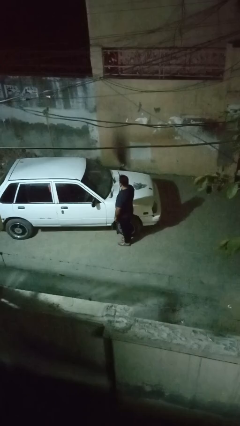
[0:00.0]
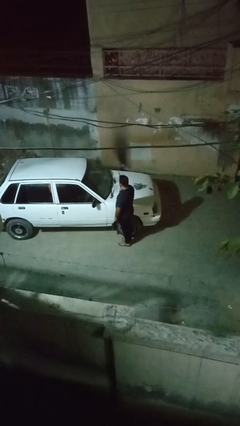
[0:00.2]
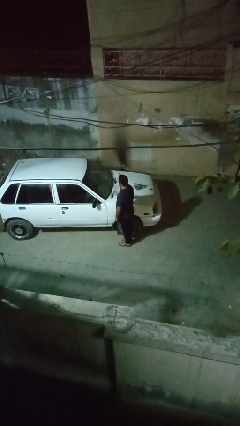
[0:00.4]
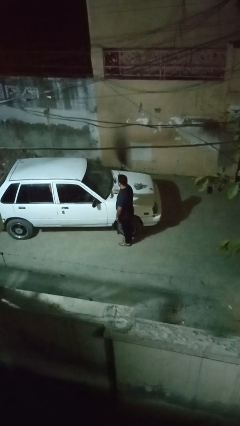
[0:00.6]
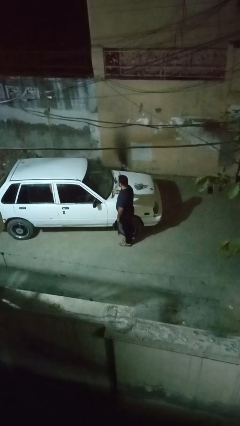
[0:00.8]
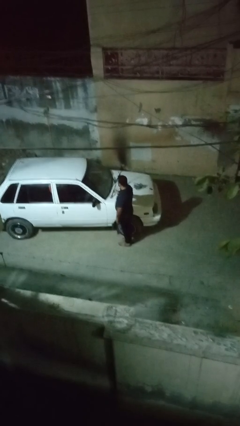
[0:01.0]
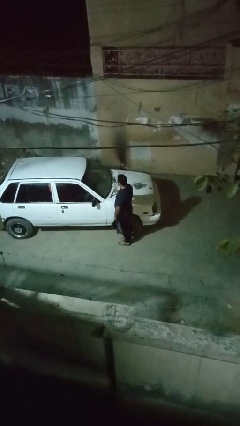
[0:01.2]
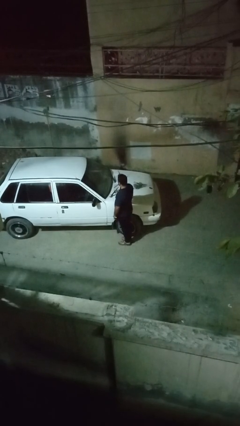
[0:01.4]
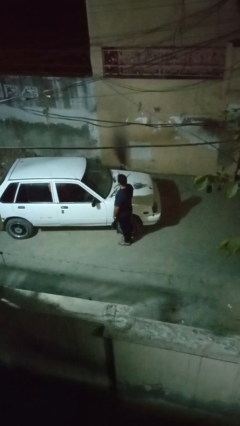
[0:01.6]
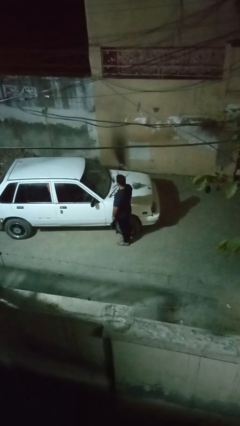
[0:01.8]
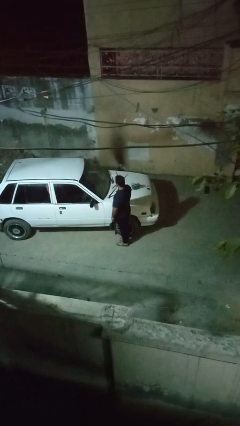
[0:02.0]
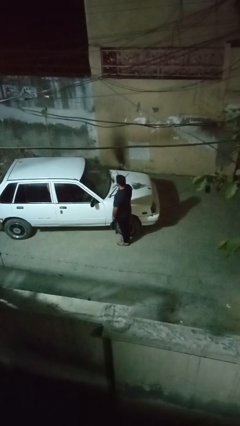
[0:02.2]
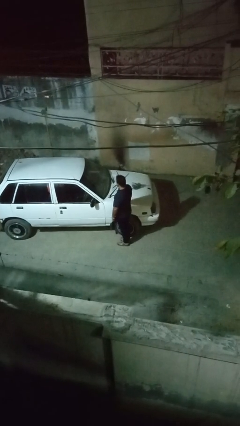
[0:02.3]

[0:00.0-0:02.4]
person flips up car wipers

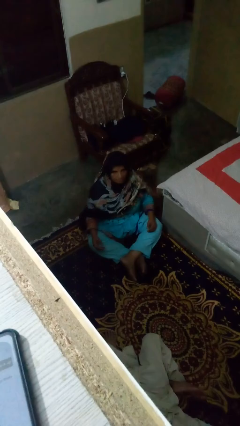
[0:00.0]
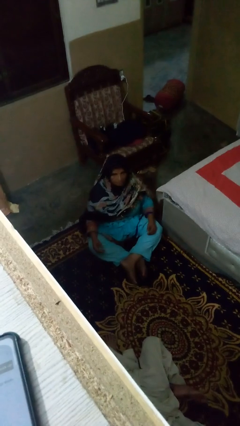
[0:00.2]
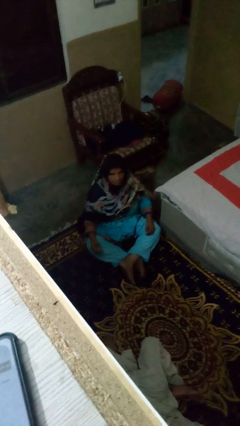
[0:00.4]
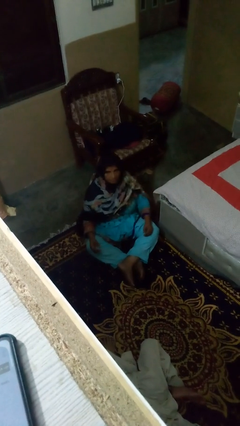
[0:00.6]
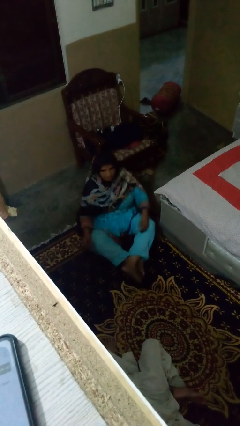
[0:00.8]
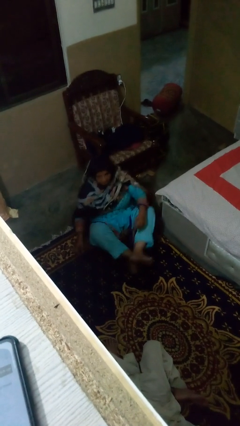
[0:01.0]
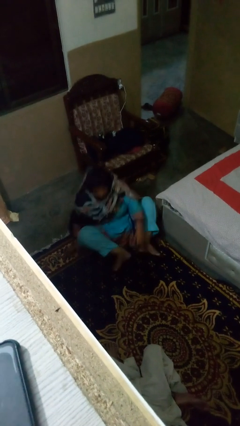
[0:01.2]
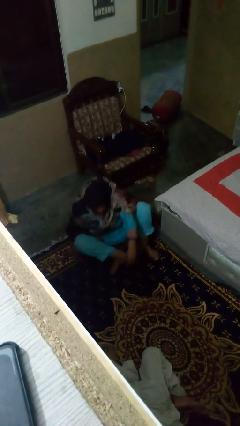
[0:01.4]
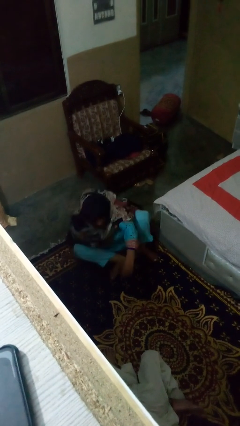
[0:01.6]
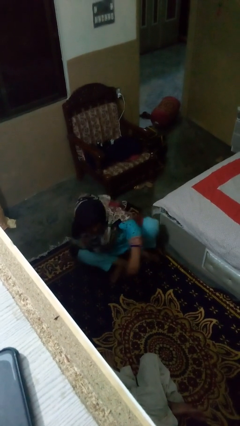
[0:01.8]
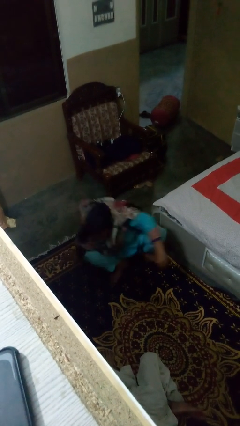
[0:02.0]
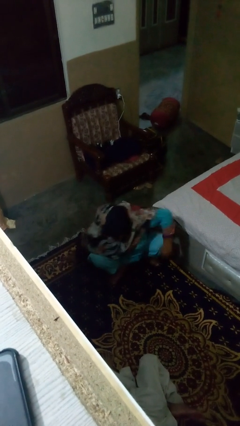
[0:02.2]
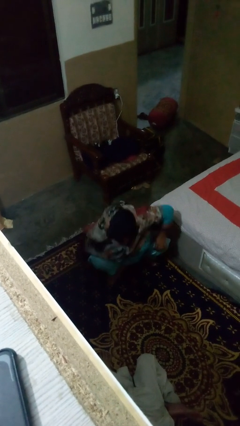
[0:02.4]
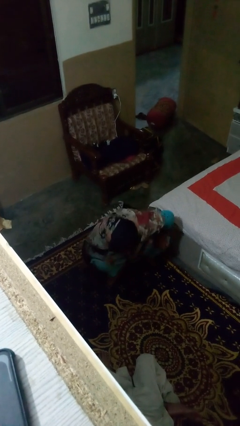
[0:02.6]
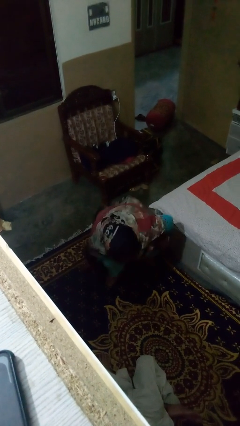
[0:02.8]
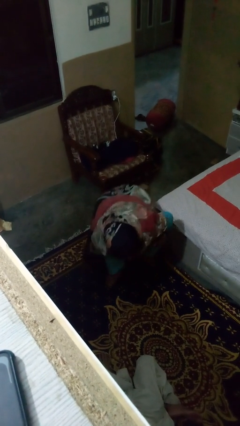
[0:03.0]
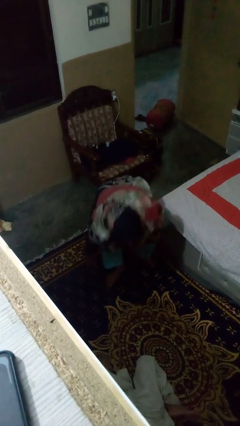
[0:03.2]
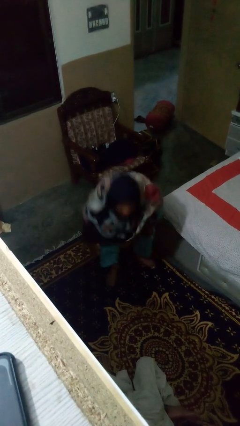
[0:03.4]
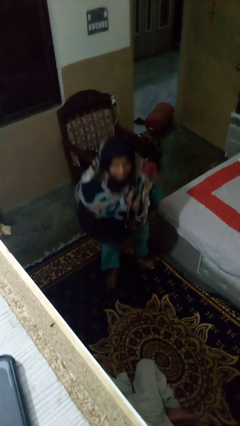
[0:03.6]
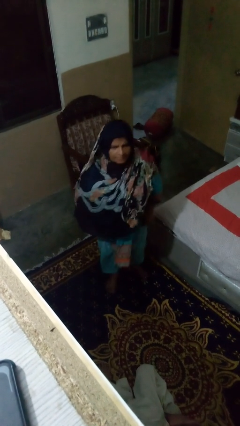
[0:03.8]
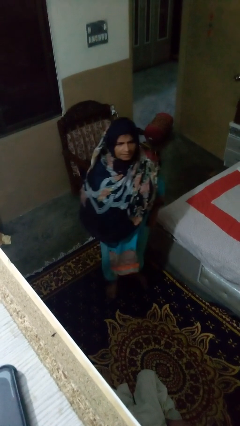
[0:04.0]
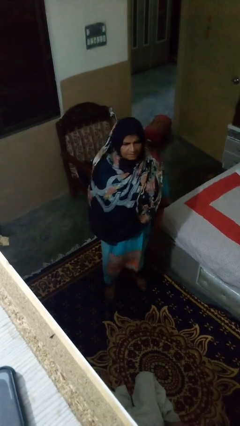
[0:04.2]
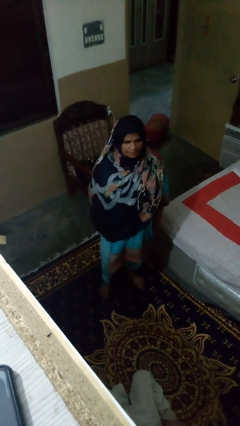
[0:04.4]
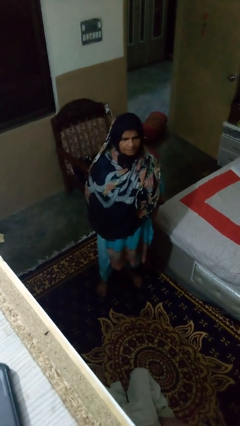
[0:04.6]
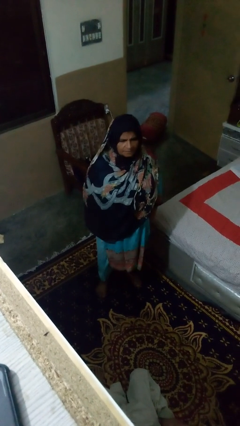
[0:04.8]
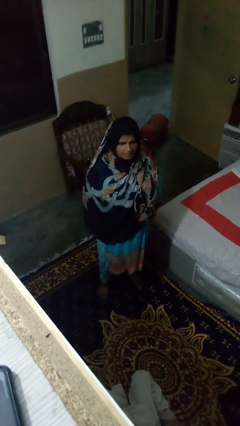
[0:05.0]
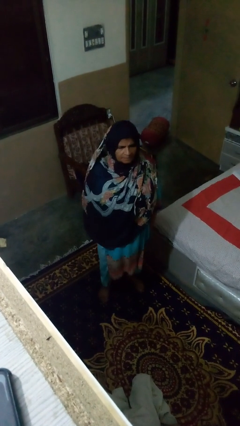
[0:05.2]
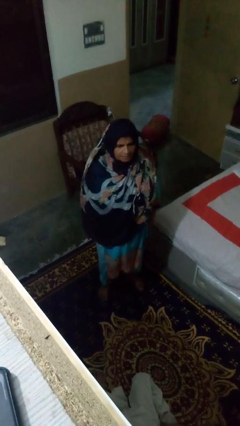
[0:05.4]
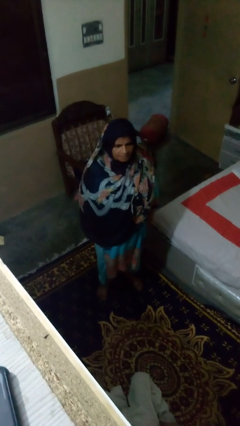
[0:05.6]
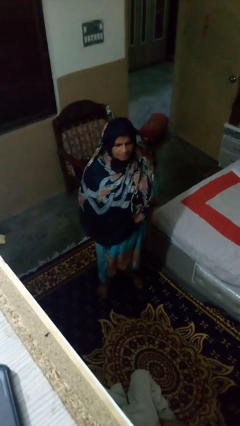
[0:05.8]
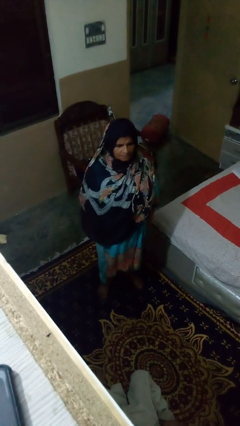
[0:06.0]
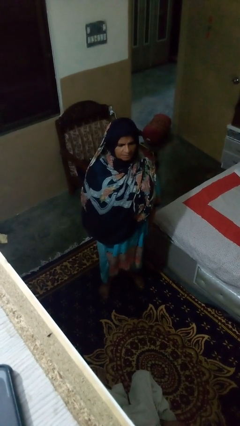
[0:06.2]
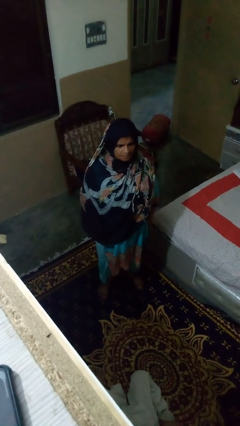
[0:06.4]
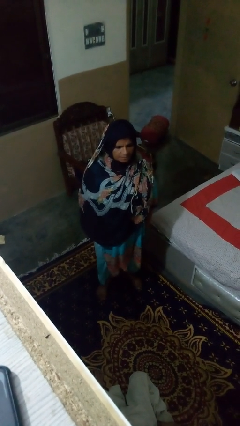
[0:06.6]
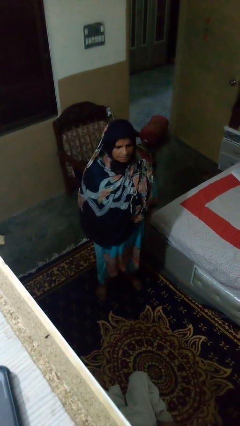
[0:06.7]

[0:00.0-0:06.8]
person stands up from floor

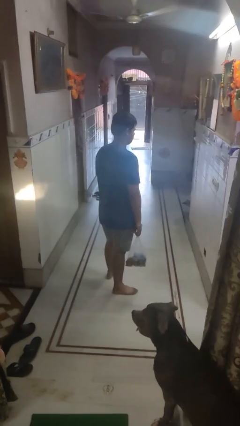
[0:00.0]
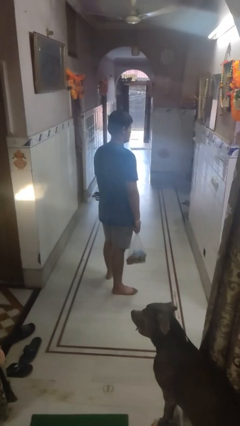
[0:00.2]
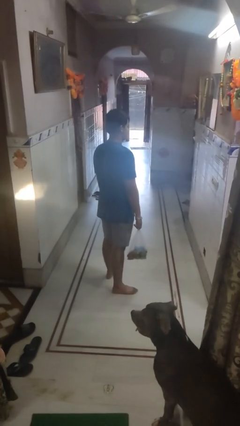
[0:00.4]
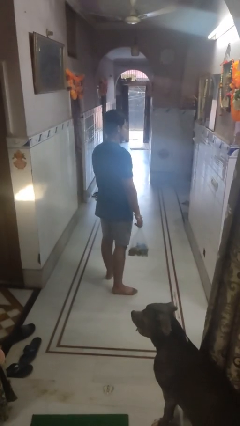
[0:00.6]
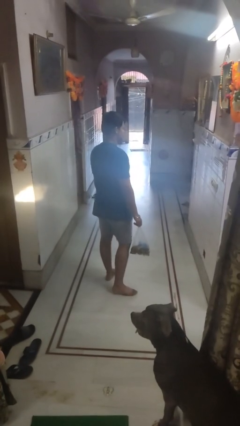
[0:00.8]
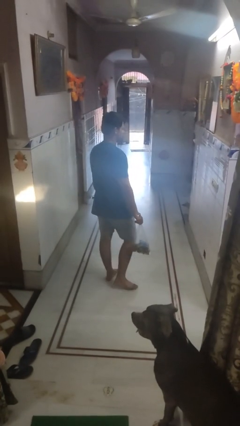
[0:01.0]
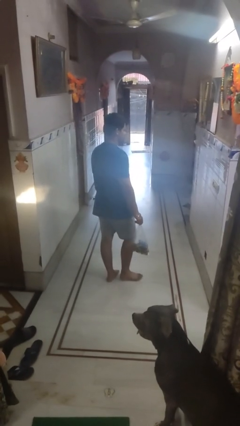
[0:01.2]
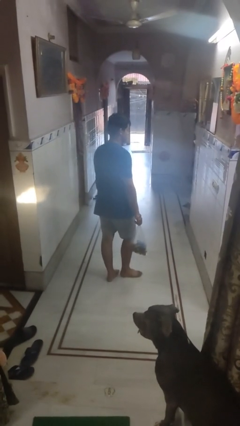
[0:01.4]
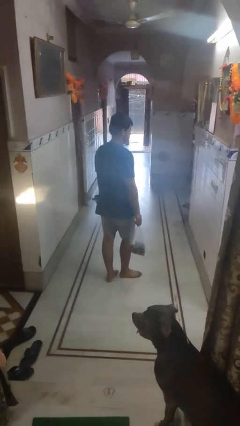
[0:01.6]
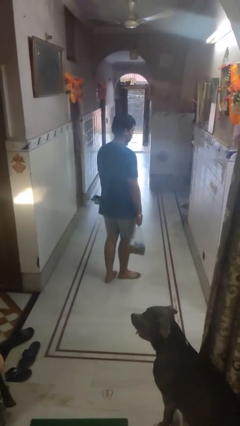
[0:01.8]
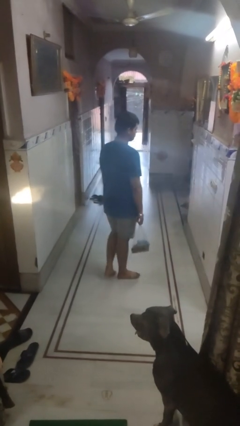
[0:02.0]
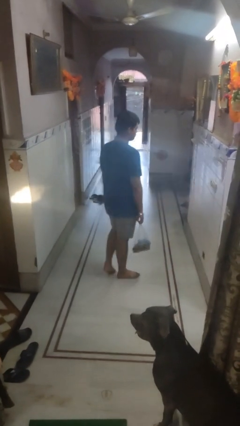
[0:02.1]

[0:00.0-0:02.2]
person carries groceries

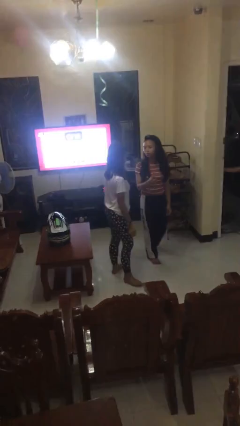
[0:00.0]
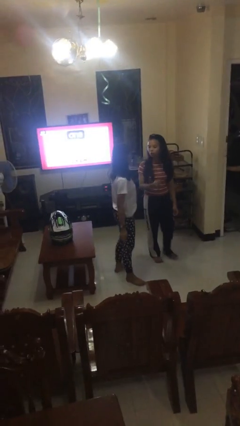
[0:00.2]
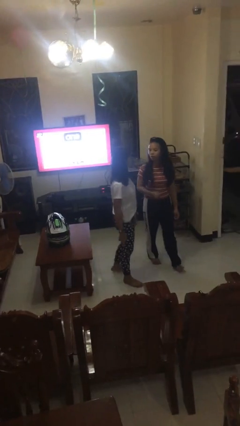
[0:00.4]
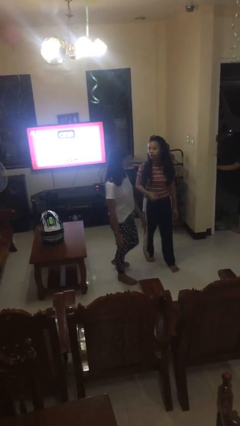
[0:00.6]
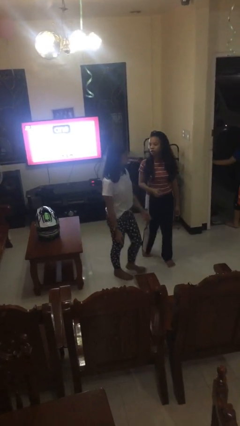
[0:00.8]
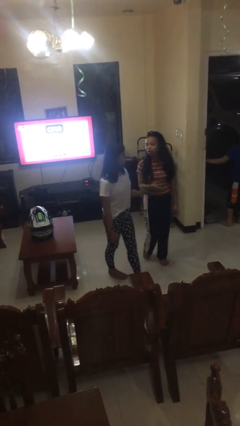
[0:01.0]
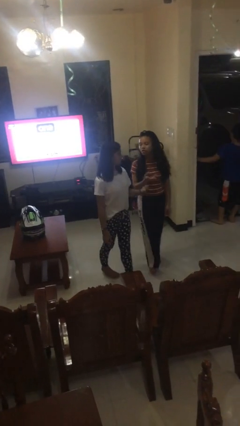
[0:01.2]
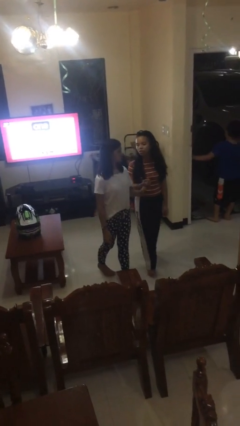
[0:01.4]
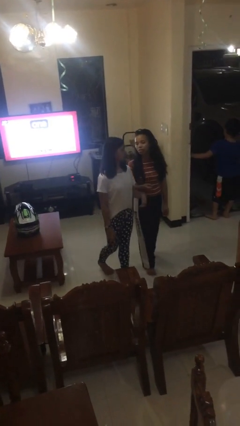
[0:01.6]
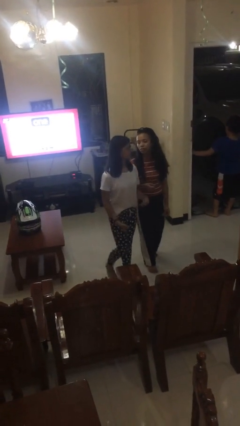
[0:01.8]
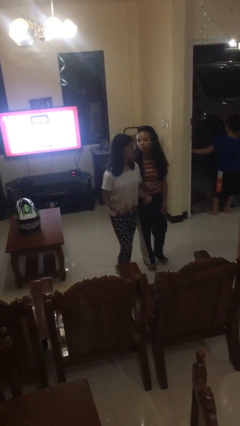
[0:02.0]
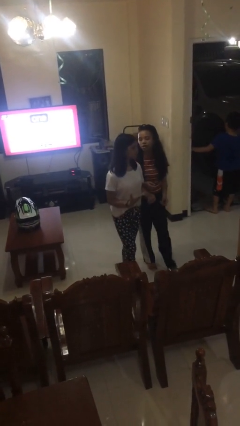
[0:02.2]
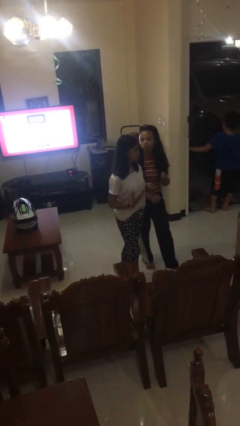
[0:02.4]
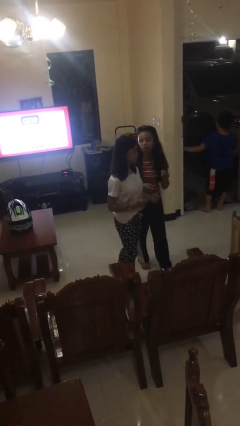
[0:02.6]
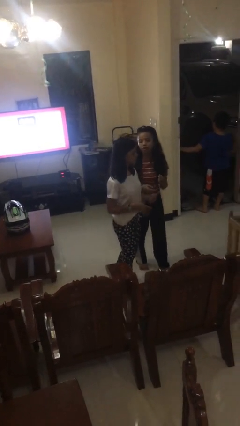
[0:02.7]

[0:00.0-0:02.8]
person talks to person

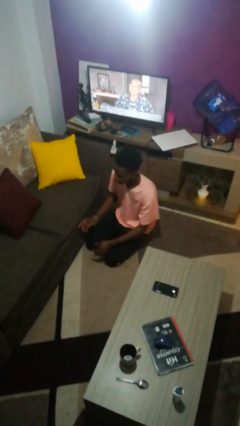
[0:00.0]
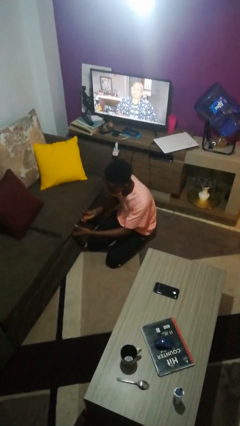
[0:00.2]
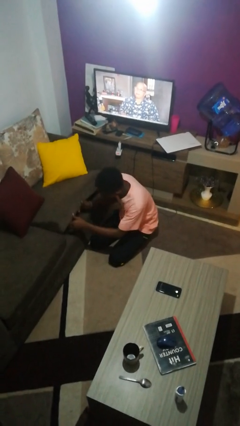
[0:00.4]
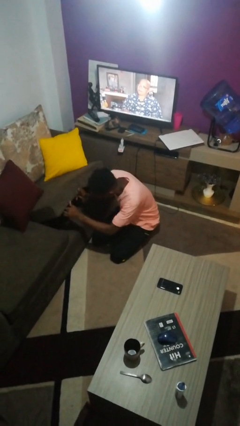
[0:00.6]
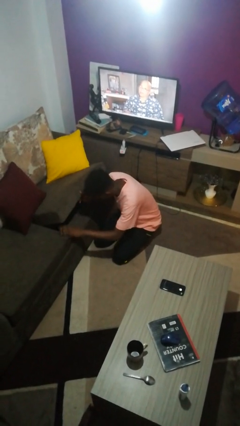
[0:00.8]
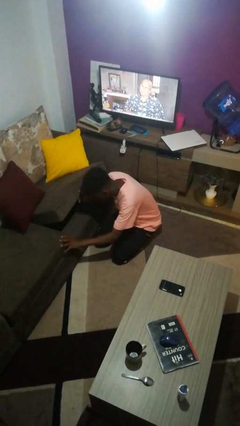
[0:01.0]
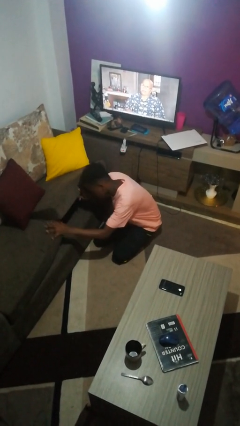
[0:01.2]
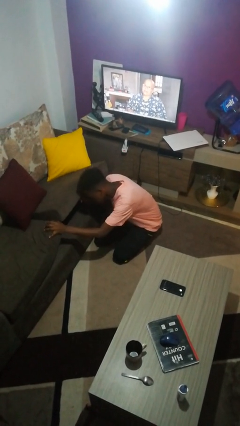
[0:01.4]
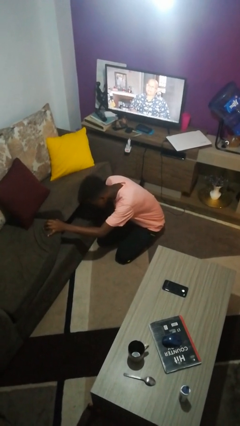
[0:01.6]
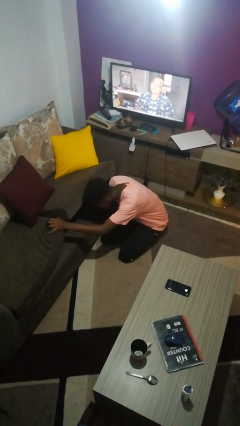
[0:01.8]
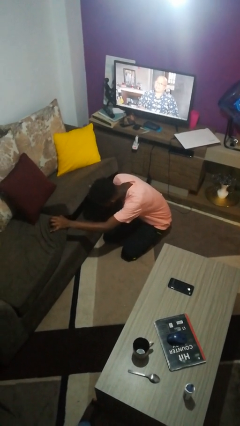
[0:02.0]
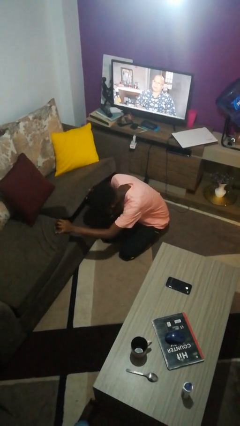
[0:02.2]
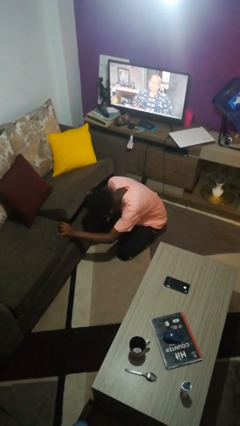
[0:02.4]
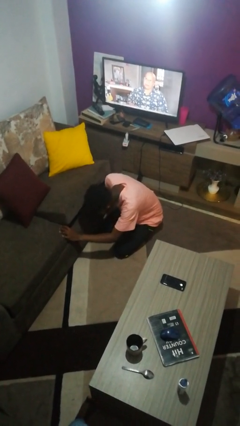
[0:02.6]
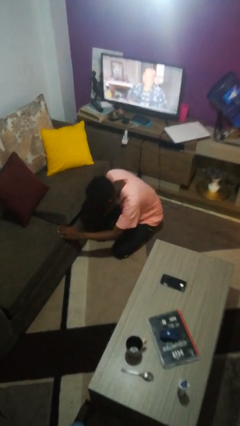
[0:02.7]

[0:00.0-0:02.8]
person searches under couch

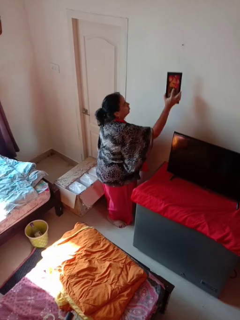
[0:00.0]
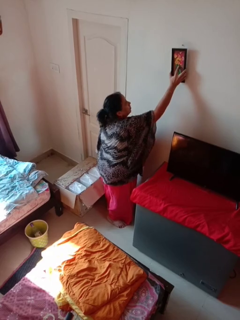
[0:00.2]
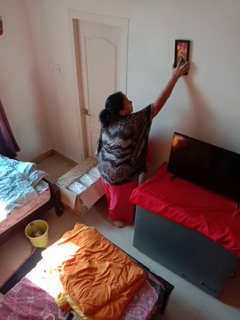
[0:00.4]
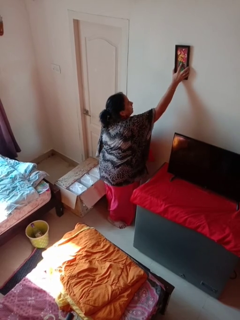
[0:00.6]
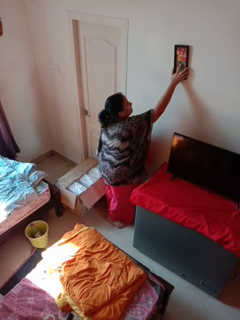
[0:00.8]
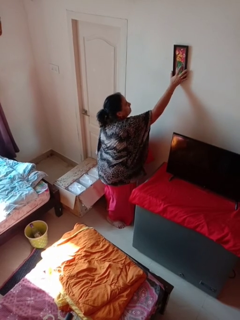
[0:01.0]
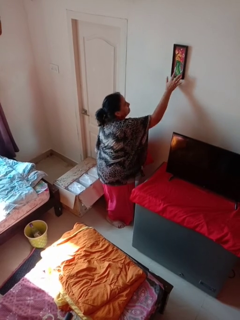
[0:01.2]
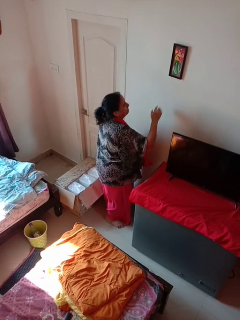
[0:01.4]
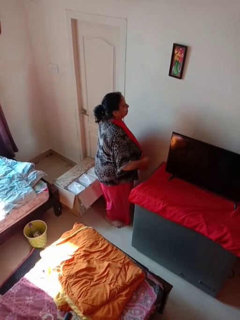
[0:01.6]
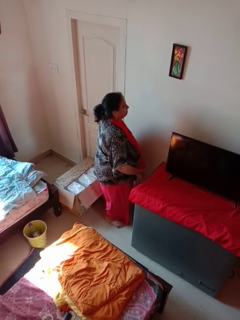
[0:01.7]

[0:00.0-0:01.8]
person puts up picture frame
